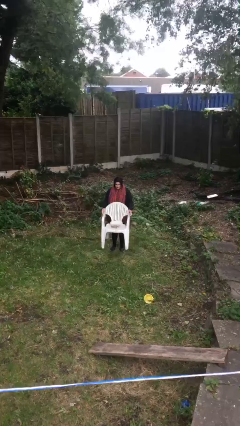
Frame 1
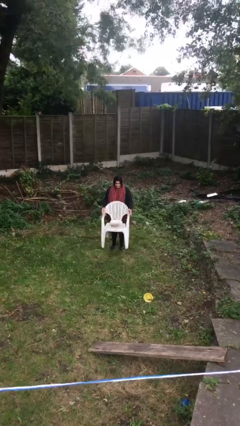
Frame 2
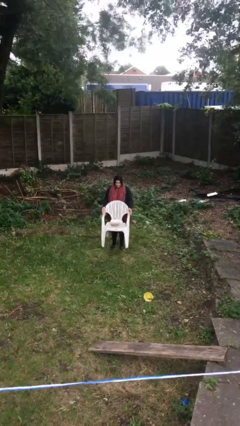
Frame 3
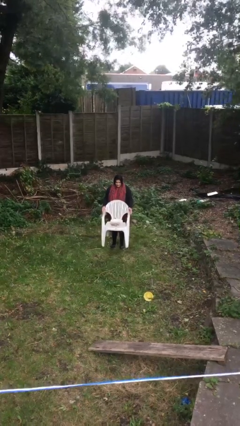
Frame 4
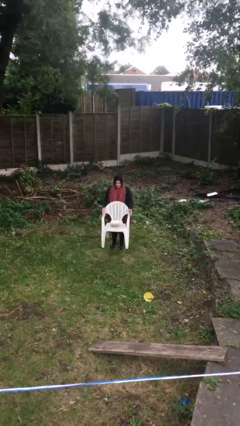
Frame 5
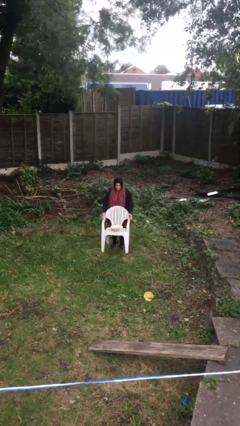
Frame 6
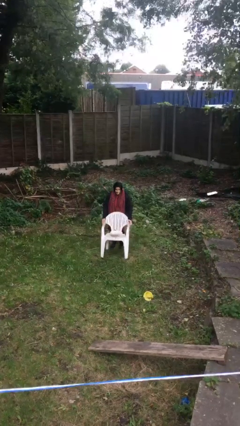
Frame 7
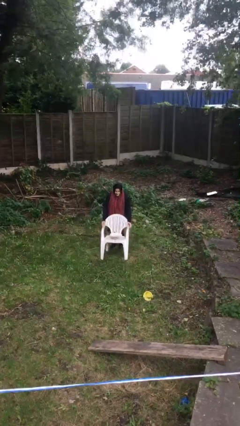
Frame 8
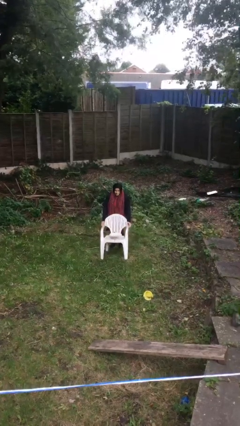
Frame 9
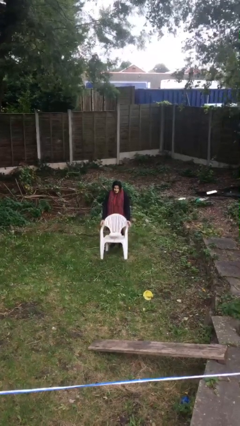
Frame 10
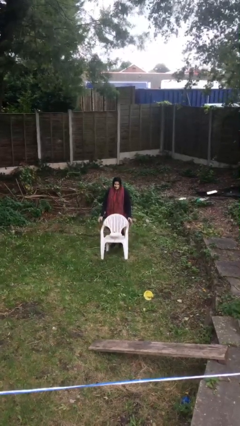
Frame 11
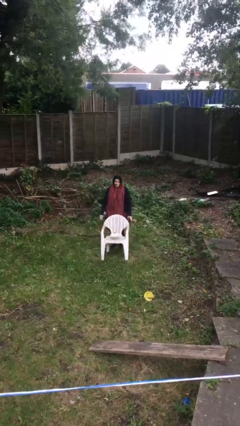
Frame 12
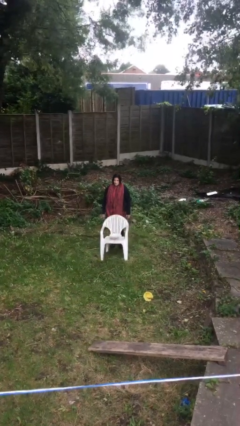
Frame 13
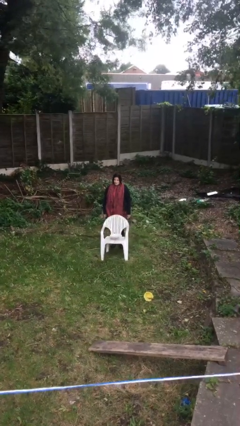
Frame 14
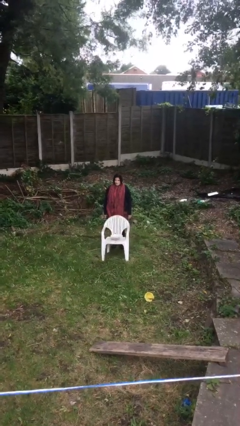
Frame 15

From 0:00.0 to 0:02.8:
person puts down object on floor

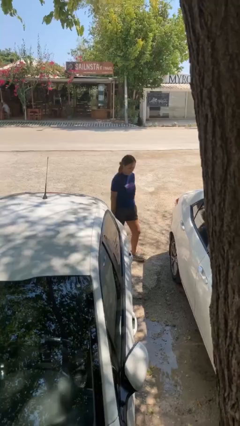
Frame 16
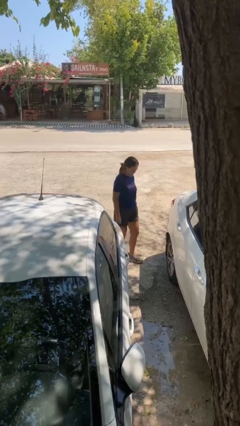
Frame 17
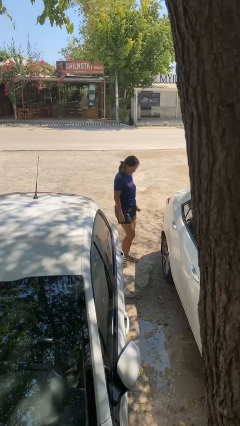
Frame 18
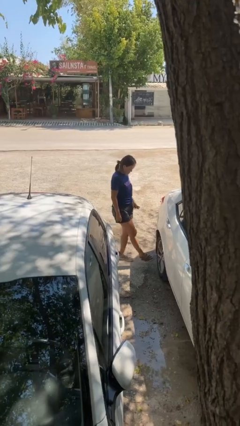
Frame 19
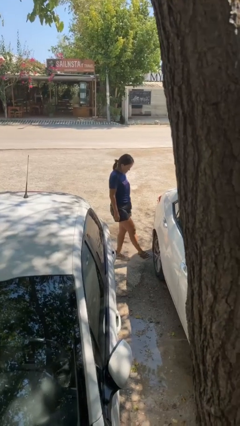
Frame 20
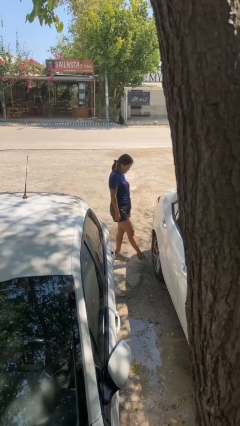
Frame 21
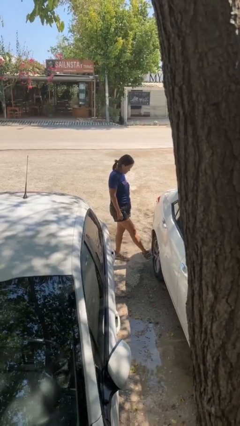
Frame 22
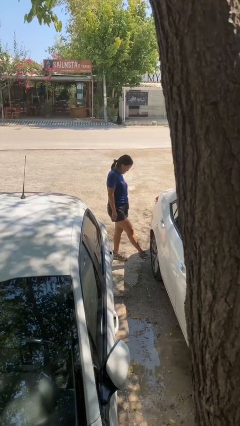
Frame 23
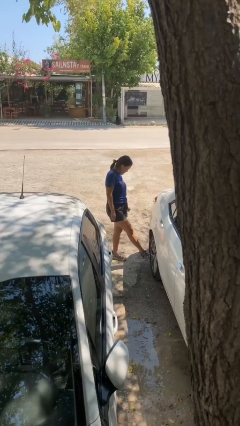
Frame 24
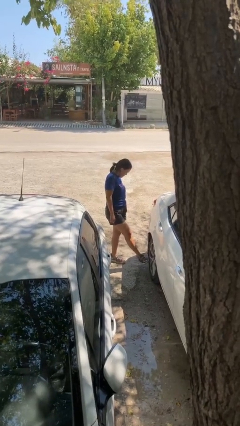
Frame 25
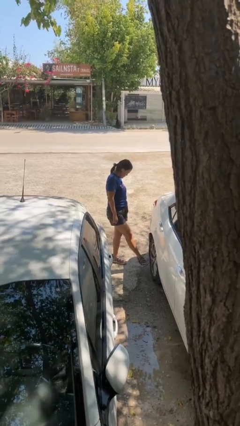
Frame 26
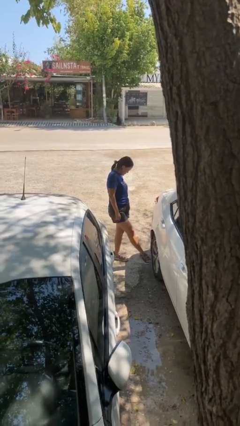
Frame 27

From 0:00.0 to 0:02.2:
person kicks car tires

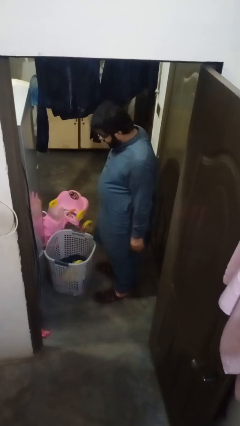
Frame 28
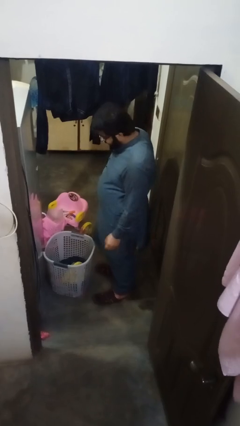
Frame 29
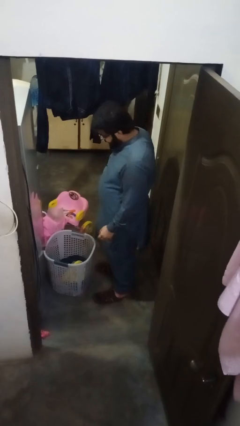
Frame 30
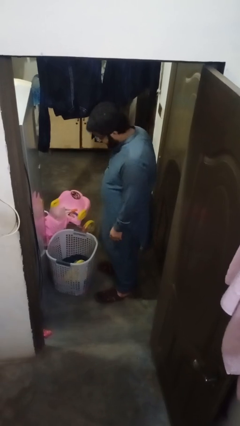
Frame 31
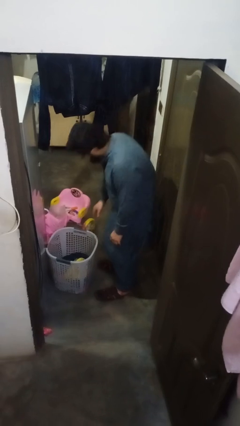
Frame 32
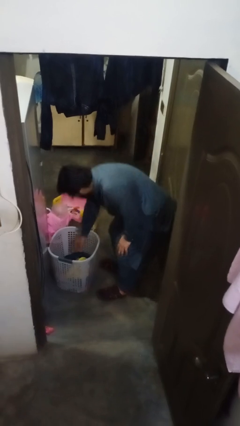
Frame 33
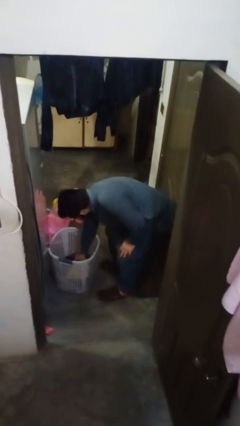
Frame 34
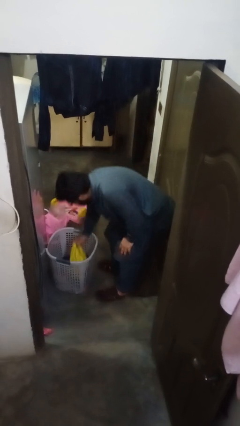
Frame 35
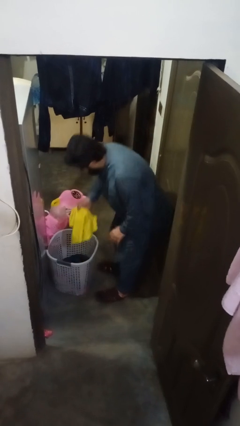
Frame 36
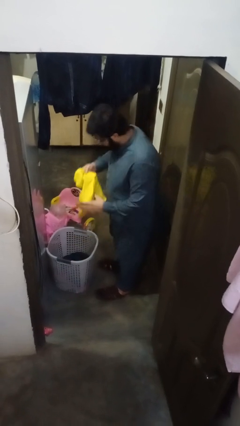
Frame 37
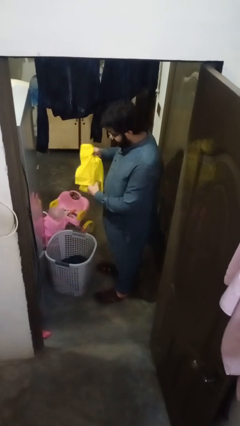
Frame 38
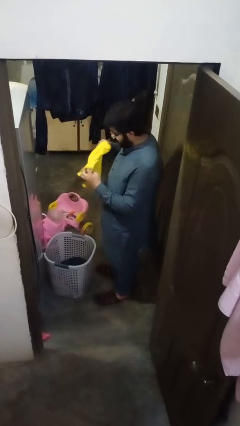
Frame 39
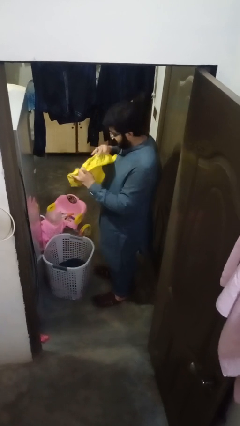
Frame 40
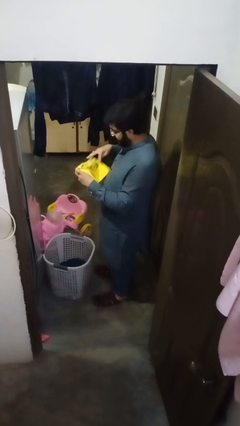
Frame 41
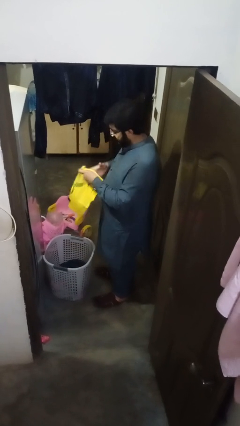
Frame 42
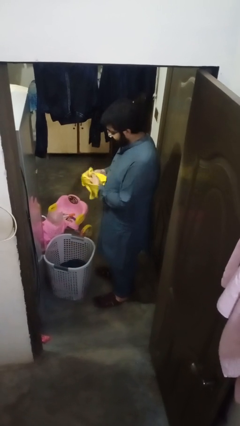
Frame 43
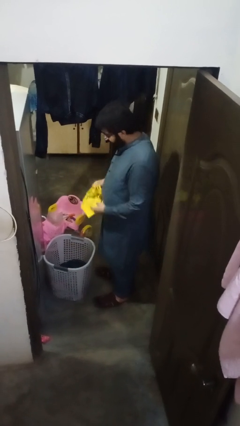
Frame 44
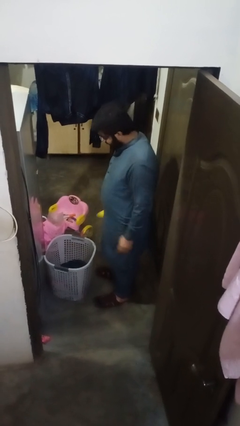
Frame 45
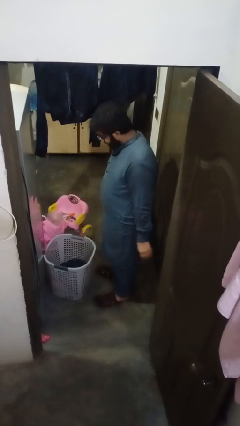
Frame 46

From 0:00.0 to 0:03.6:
person folds shirt

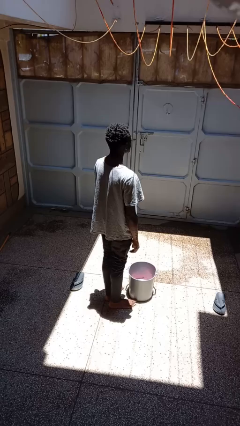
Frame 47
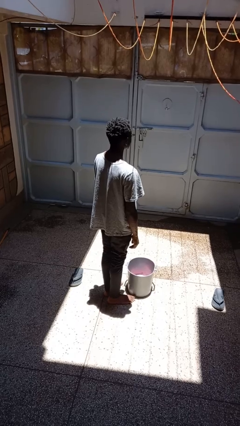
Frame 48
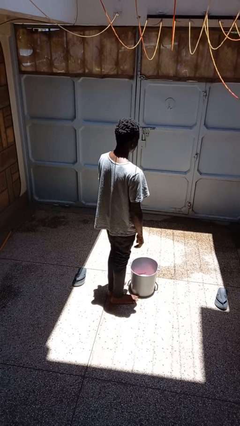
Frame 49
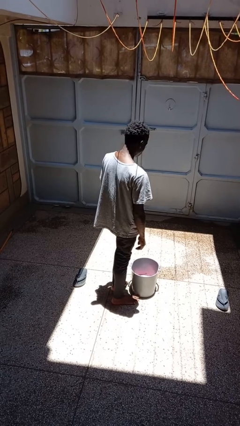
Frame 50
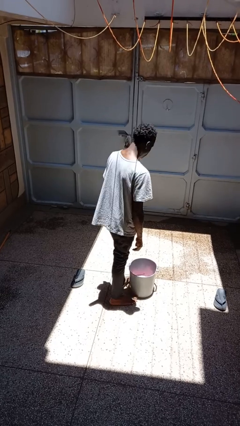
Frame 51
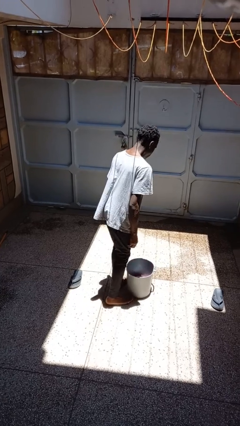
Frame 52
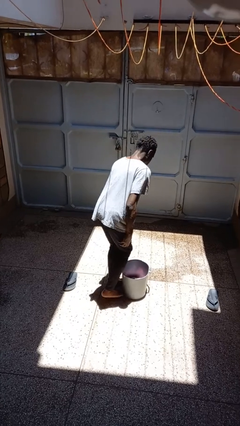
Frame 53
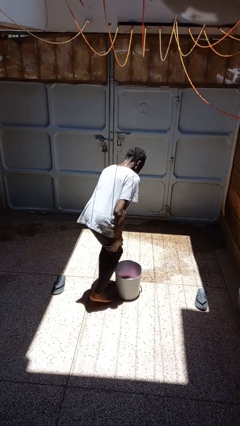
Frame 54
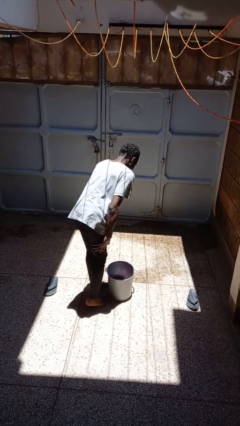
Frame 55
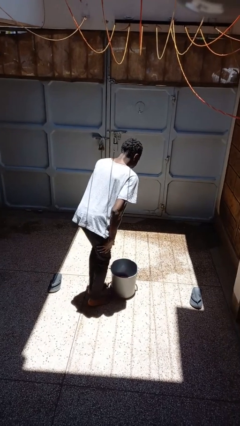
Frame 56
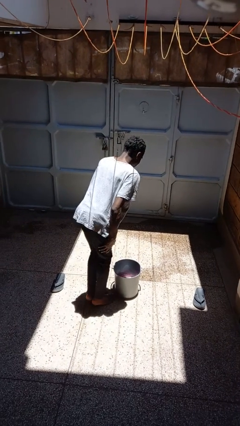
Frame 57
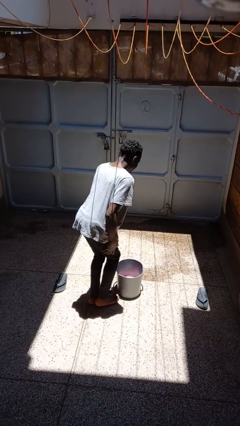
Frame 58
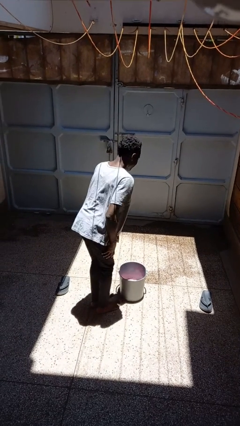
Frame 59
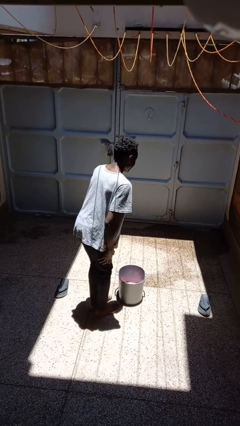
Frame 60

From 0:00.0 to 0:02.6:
person stubs toe

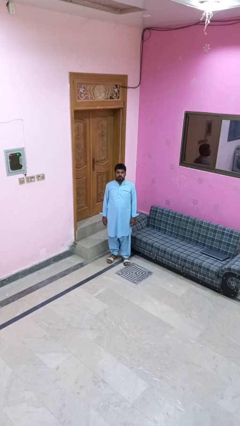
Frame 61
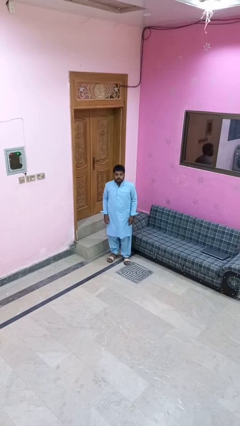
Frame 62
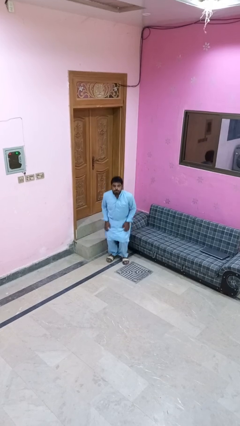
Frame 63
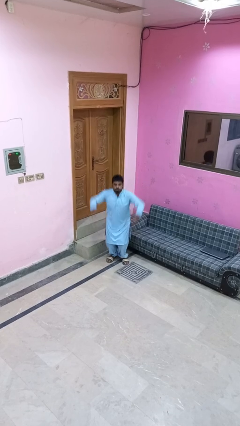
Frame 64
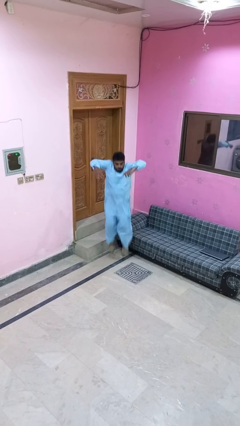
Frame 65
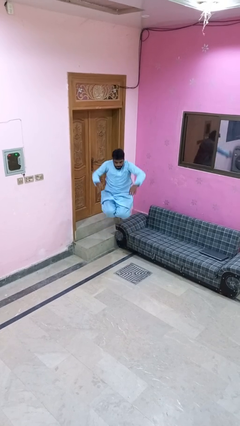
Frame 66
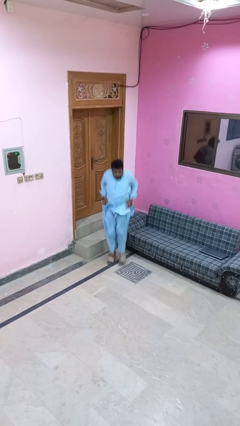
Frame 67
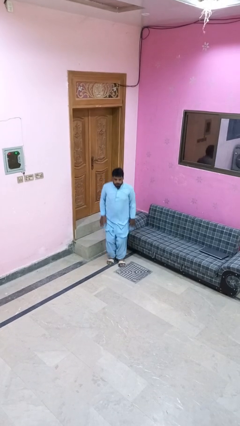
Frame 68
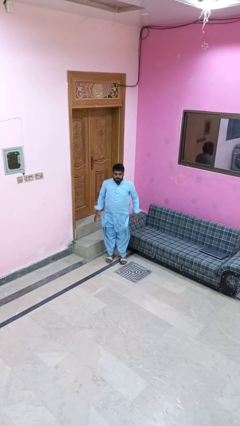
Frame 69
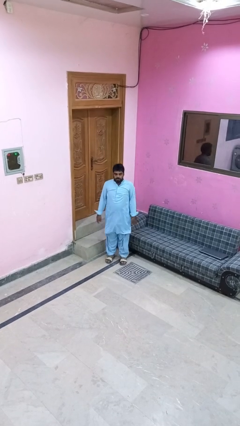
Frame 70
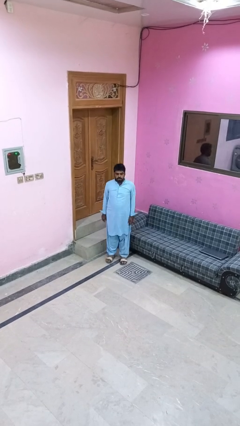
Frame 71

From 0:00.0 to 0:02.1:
person jumps

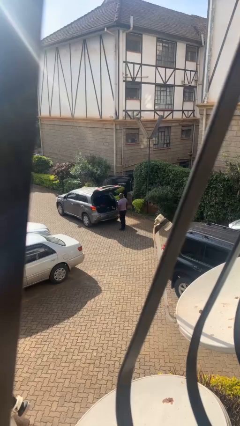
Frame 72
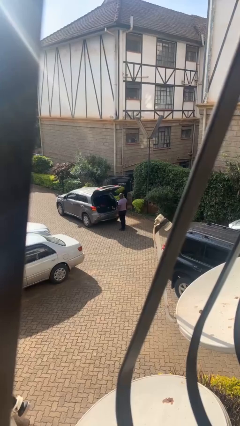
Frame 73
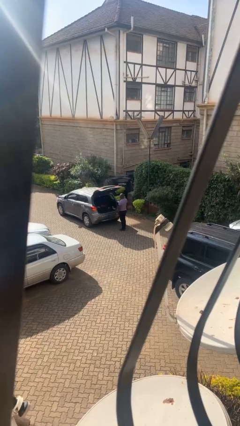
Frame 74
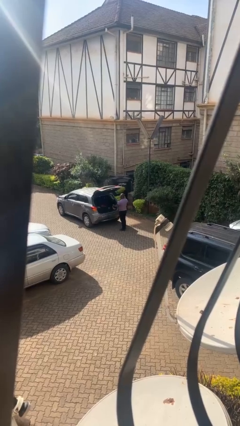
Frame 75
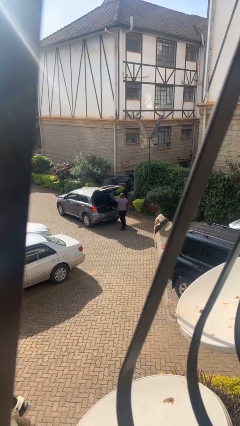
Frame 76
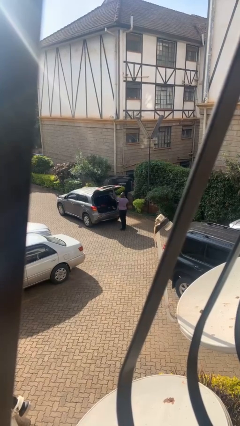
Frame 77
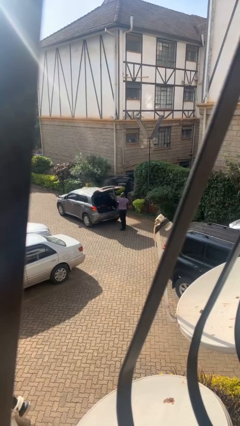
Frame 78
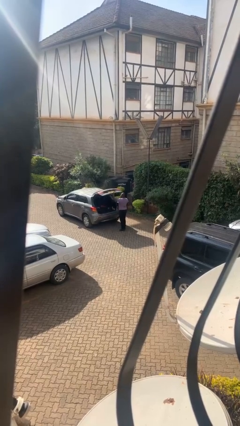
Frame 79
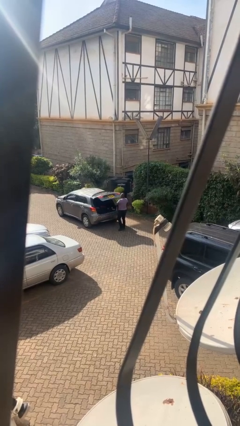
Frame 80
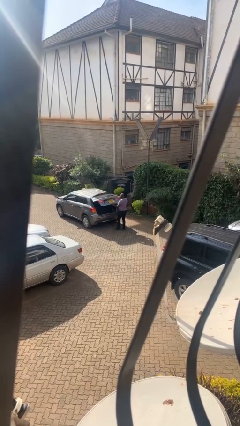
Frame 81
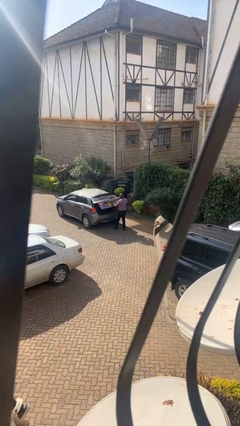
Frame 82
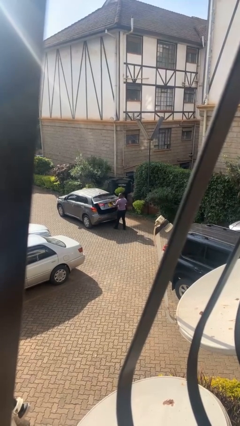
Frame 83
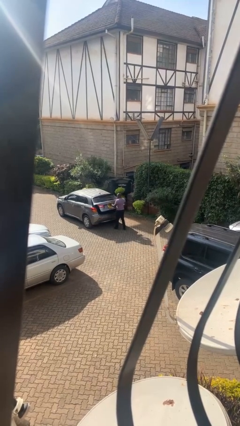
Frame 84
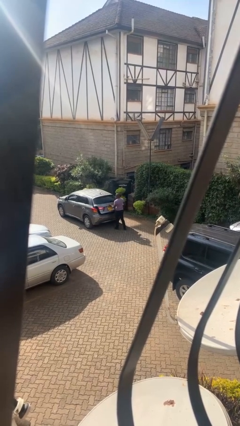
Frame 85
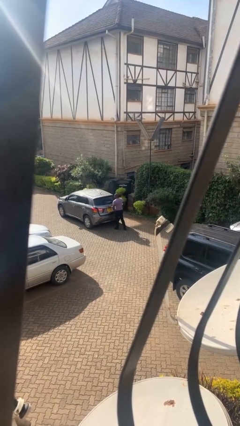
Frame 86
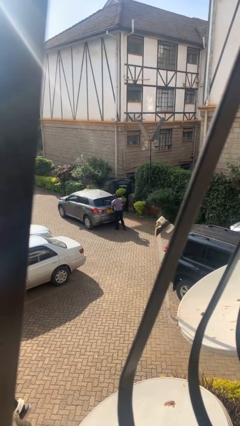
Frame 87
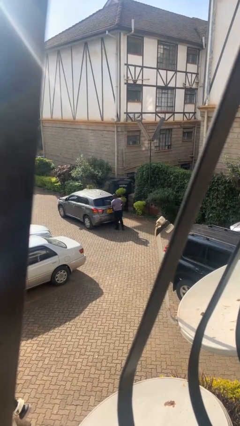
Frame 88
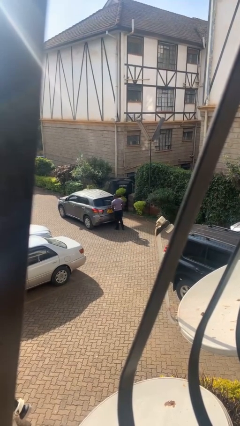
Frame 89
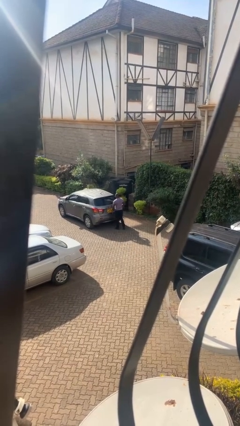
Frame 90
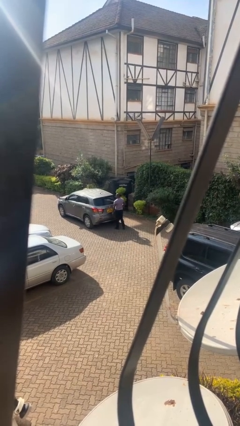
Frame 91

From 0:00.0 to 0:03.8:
person closes car trunk

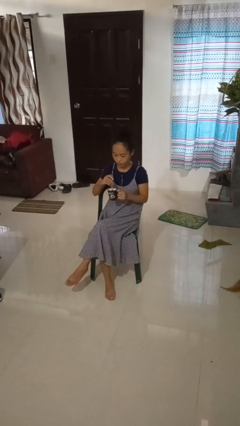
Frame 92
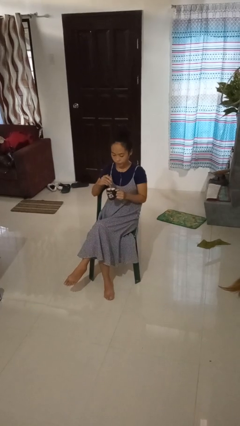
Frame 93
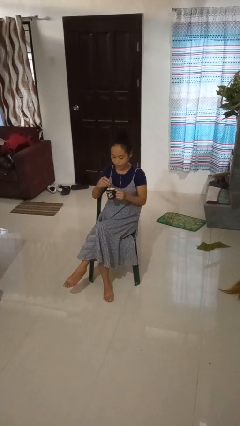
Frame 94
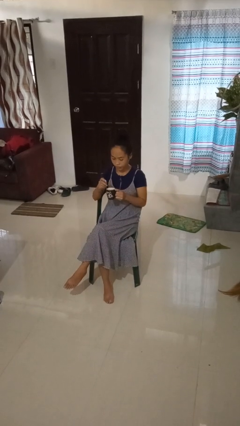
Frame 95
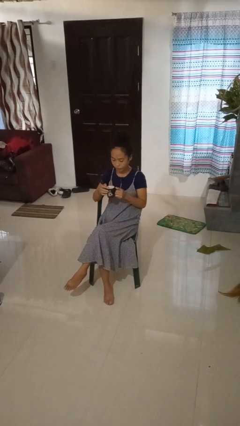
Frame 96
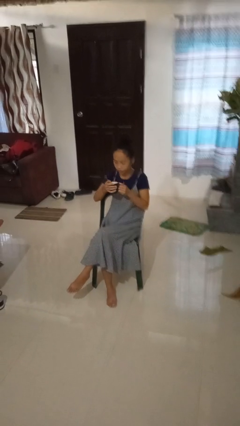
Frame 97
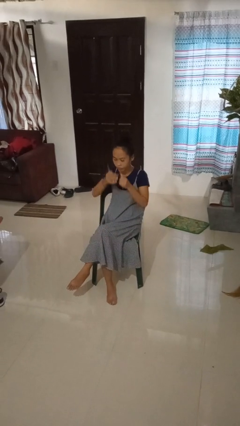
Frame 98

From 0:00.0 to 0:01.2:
person stirs mug
